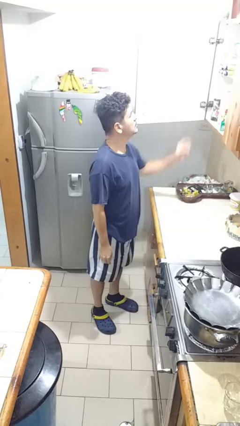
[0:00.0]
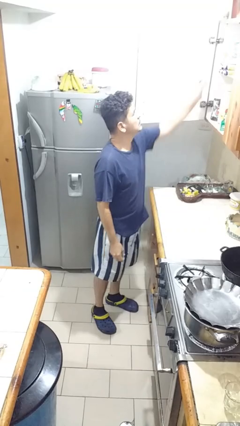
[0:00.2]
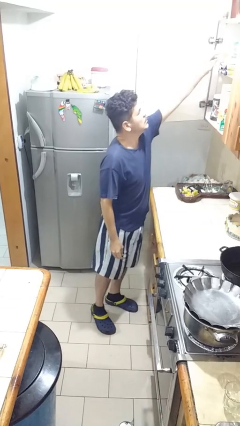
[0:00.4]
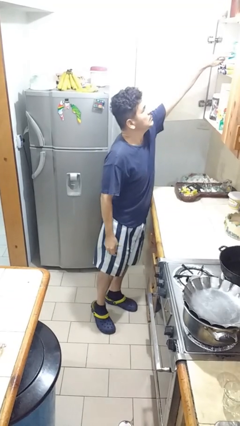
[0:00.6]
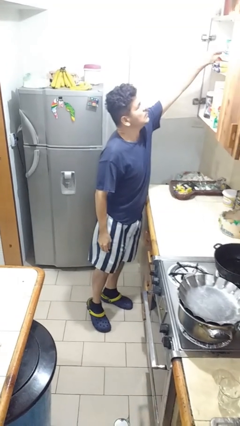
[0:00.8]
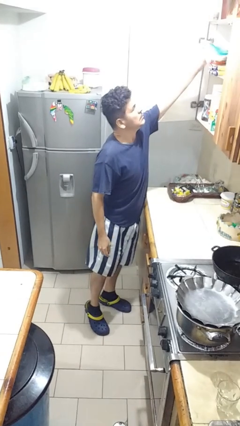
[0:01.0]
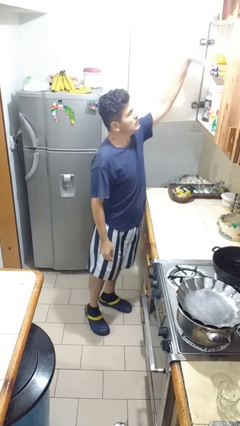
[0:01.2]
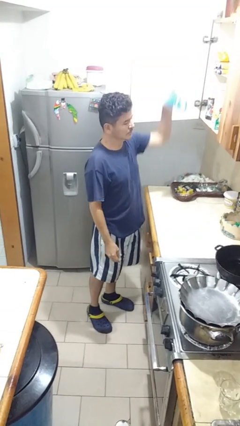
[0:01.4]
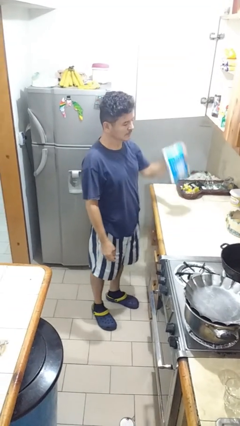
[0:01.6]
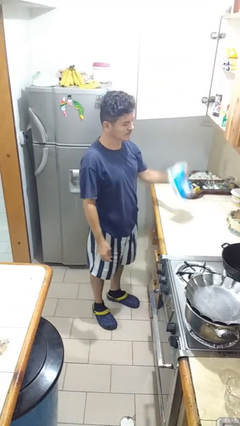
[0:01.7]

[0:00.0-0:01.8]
person takes object from cabinet

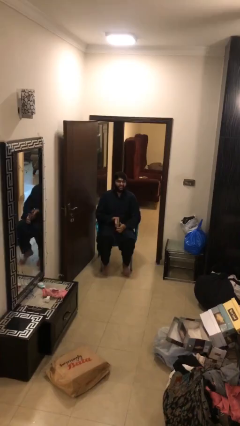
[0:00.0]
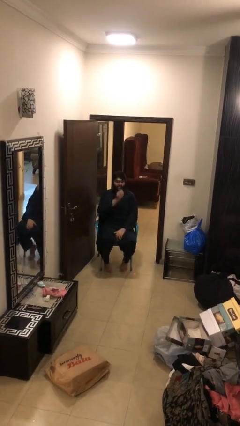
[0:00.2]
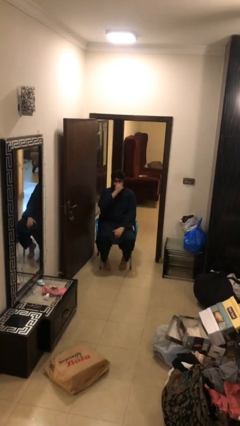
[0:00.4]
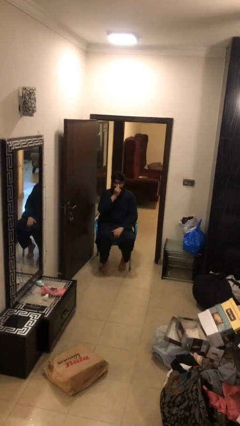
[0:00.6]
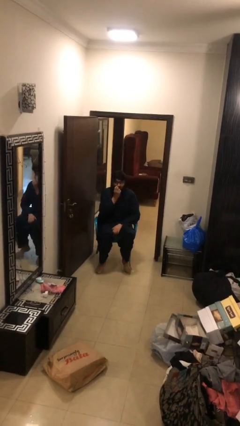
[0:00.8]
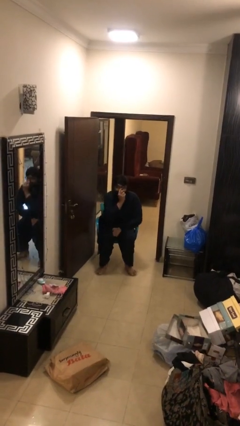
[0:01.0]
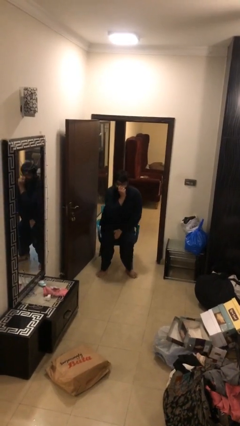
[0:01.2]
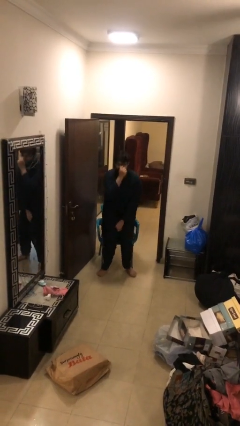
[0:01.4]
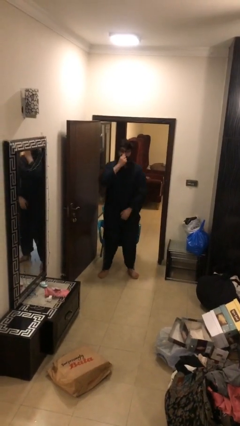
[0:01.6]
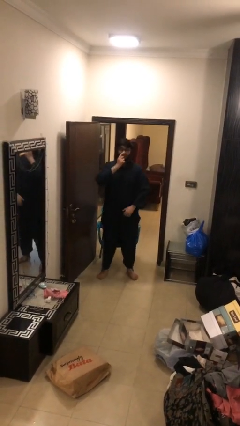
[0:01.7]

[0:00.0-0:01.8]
person stands up

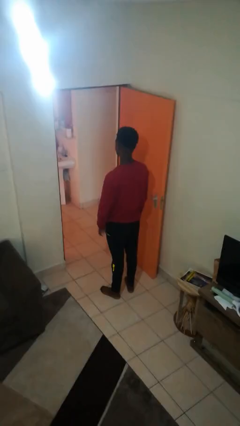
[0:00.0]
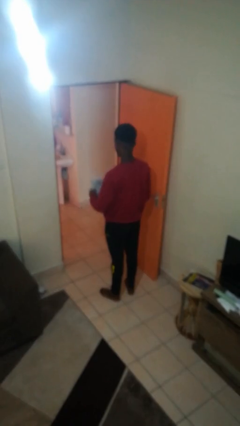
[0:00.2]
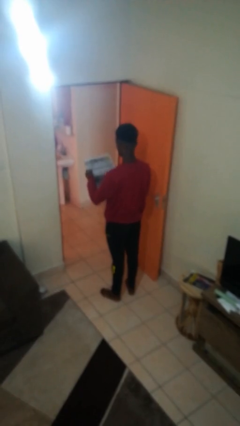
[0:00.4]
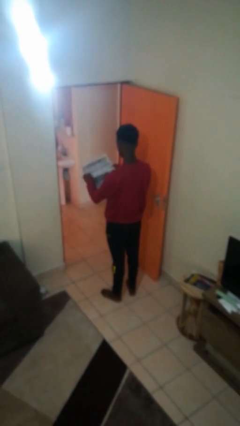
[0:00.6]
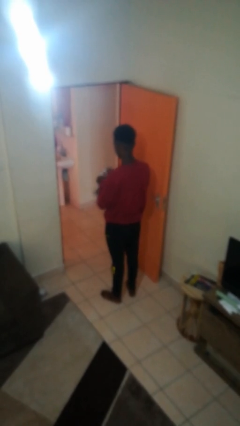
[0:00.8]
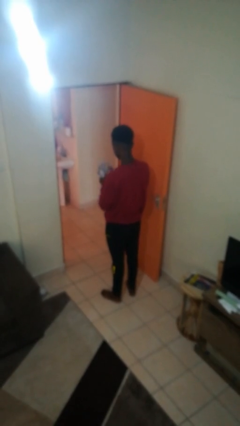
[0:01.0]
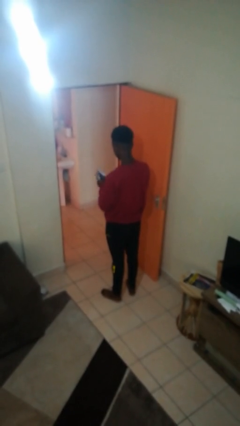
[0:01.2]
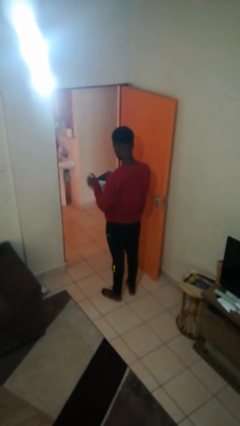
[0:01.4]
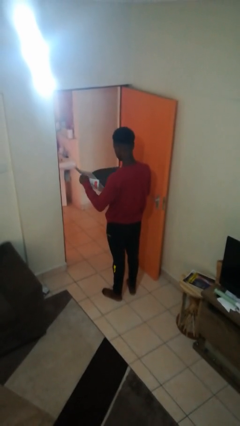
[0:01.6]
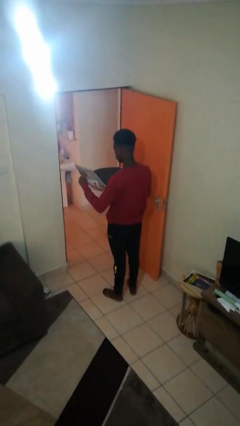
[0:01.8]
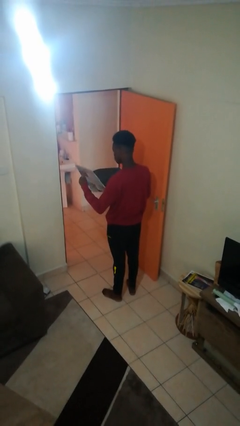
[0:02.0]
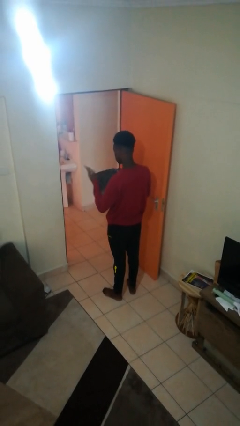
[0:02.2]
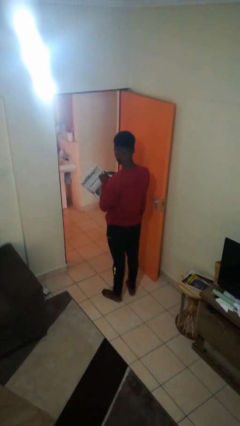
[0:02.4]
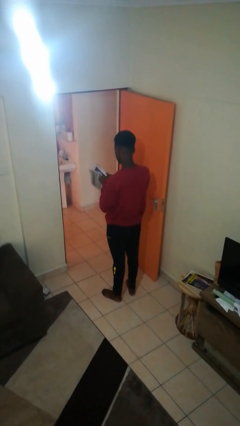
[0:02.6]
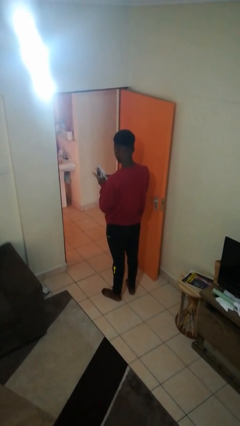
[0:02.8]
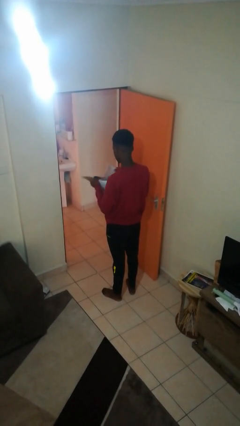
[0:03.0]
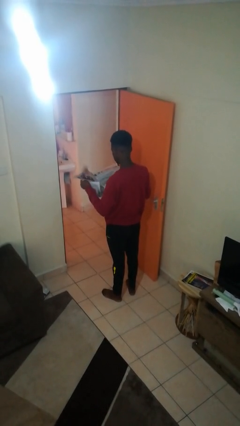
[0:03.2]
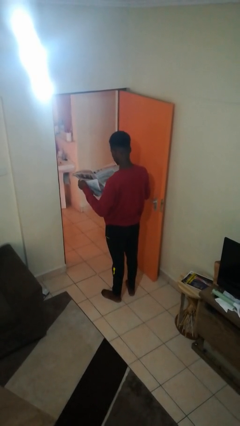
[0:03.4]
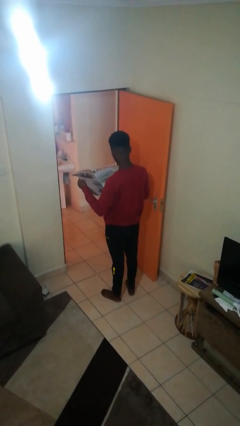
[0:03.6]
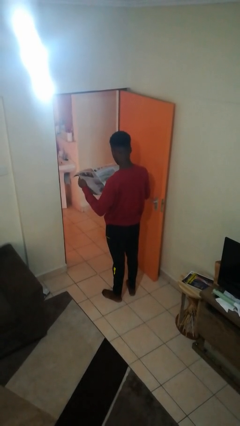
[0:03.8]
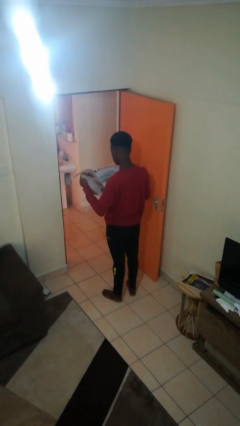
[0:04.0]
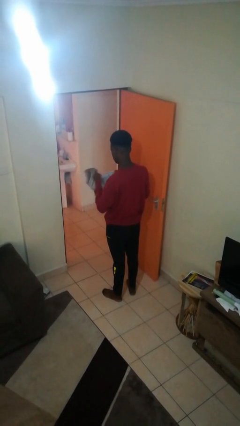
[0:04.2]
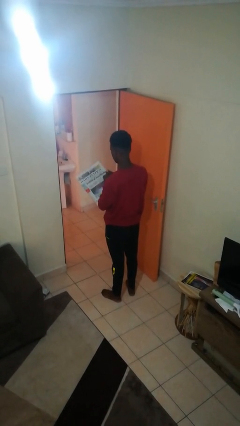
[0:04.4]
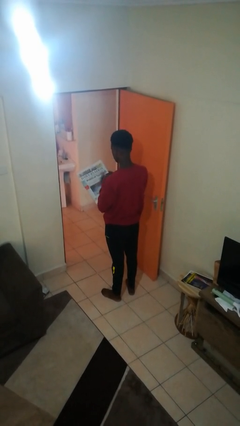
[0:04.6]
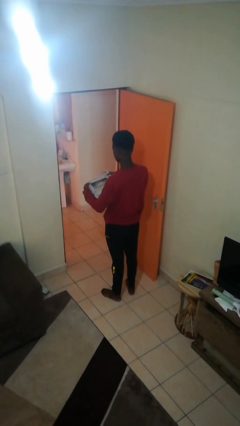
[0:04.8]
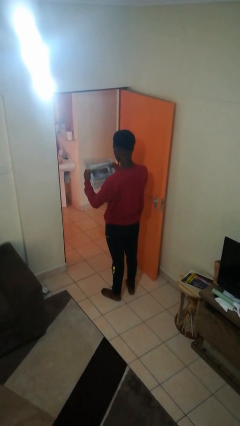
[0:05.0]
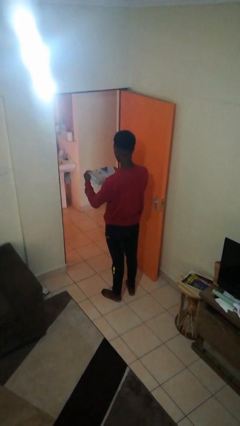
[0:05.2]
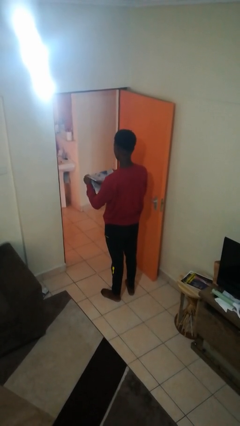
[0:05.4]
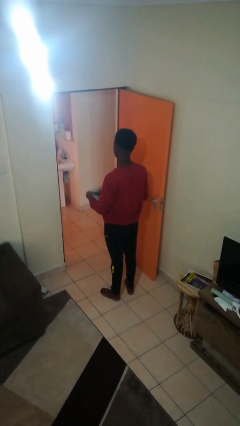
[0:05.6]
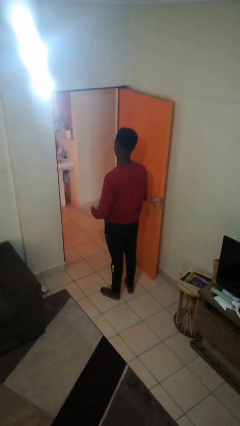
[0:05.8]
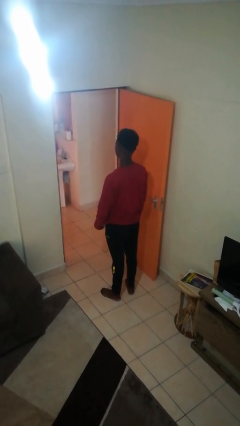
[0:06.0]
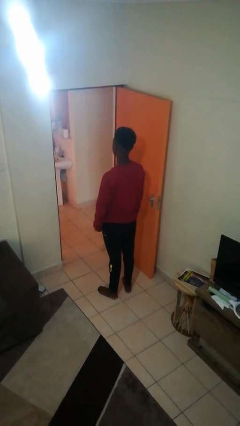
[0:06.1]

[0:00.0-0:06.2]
person reads newspaper

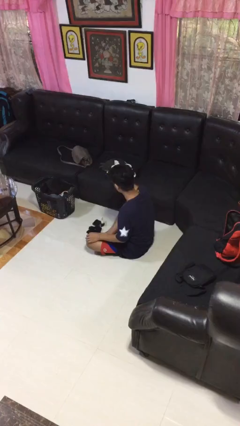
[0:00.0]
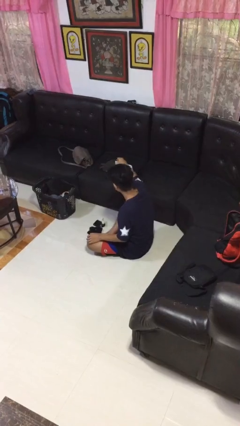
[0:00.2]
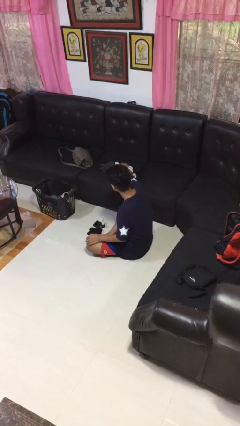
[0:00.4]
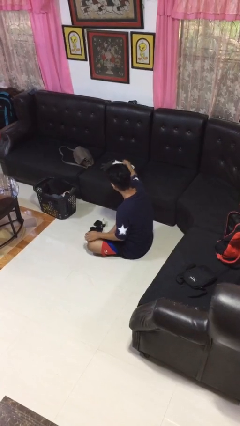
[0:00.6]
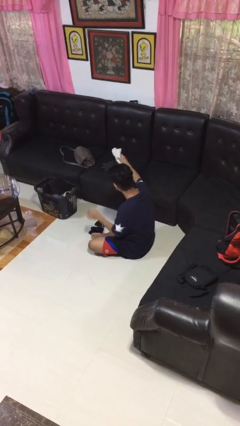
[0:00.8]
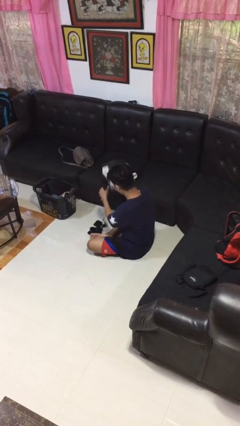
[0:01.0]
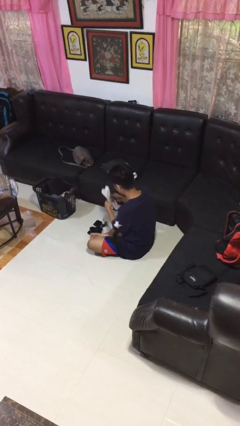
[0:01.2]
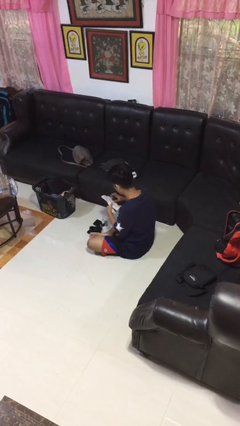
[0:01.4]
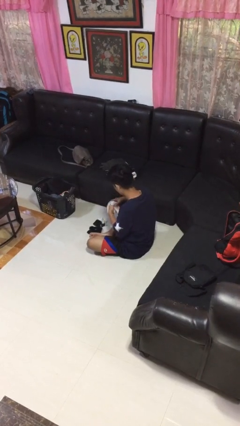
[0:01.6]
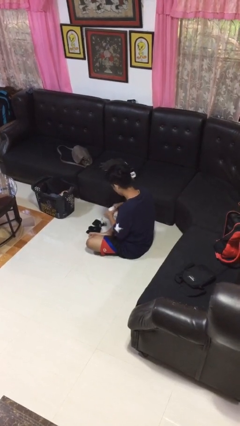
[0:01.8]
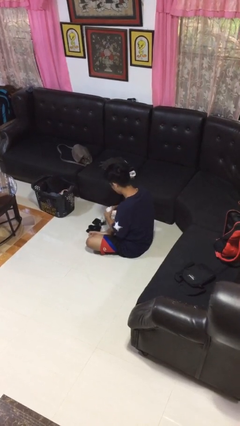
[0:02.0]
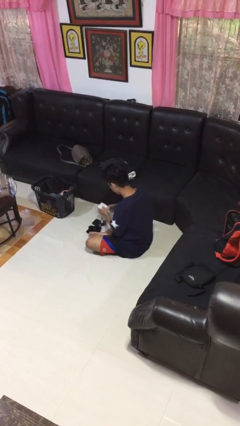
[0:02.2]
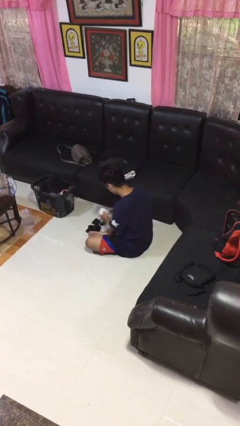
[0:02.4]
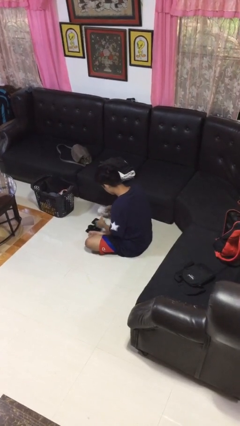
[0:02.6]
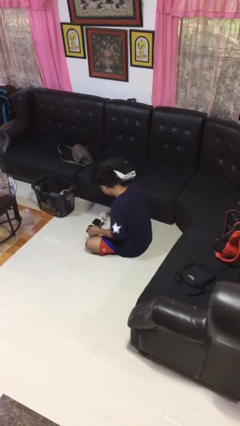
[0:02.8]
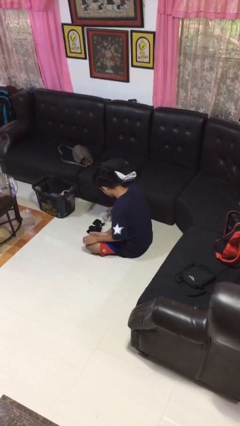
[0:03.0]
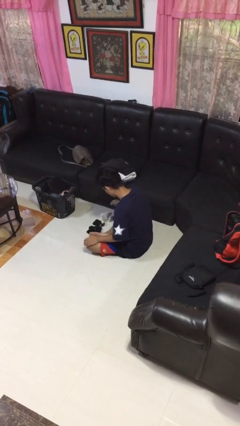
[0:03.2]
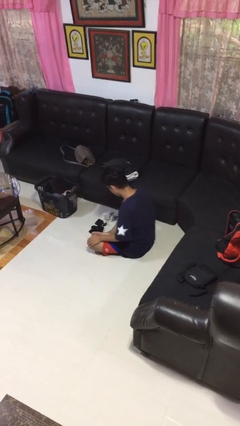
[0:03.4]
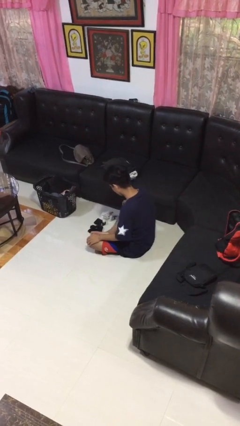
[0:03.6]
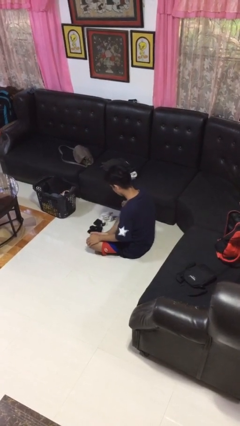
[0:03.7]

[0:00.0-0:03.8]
person folds socks

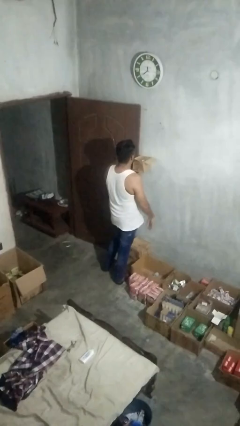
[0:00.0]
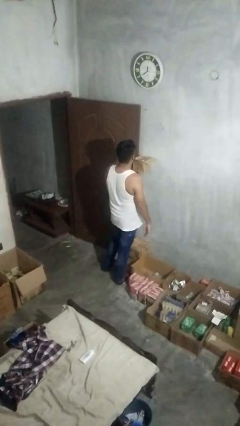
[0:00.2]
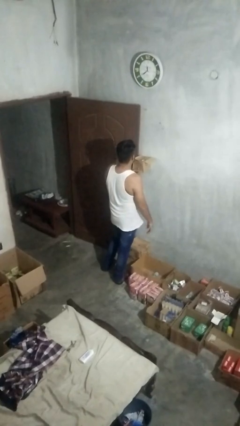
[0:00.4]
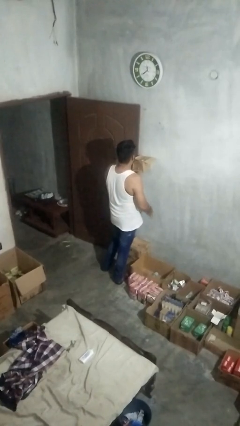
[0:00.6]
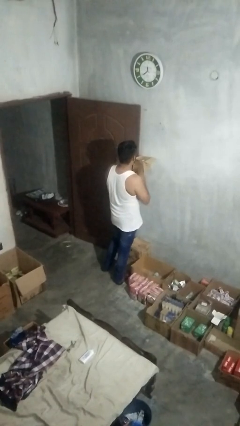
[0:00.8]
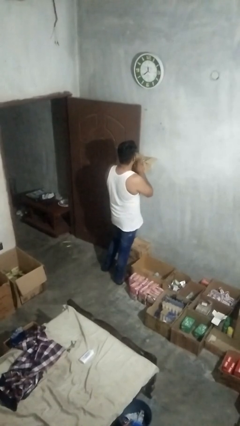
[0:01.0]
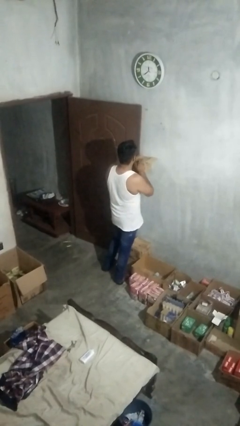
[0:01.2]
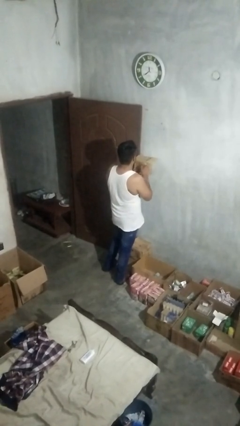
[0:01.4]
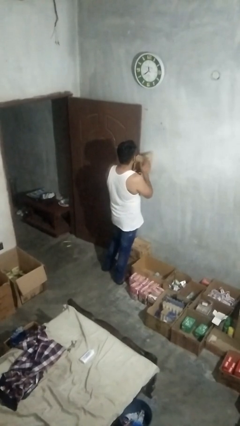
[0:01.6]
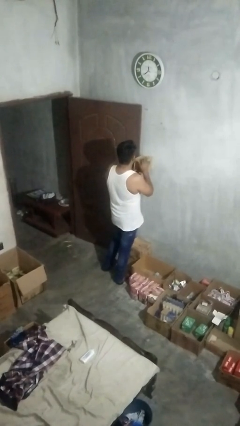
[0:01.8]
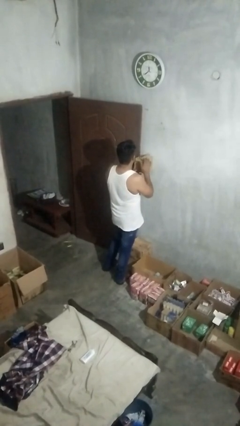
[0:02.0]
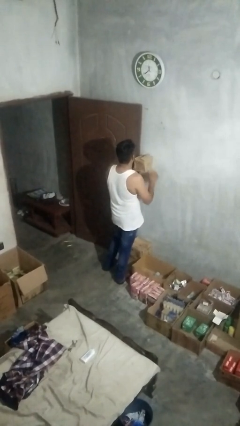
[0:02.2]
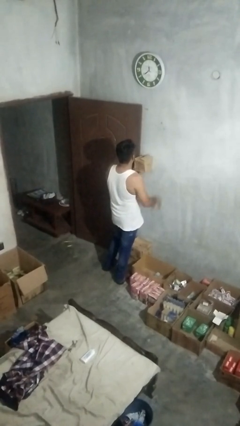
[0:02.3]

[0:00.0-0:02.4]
person closes mailbox

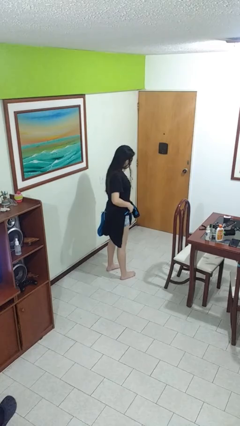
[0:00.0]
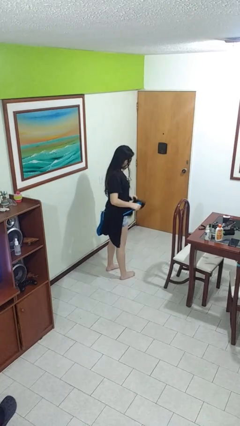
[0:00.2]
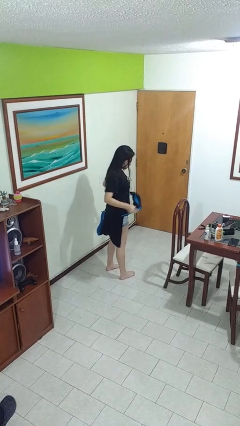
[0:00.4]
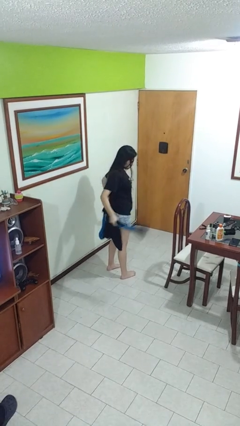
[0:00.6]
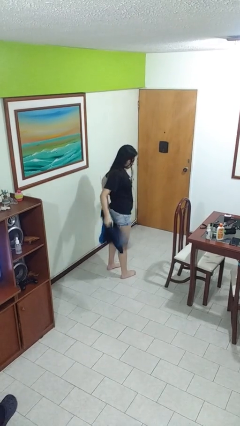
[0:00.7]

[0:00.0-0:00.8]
person unties jacket around waist

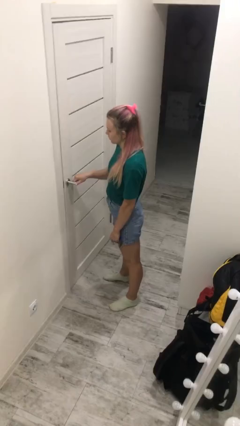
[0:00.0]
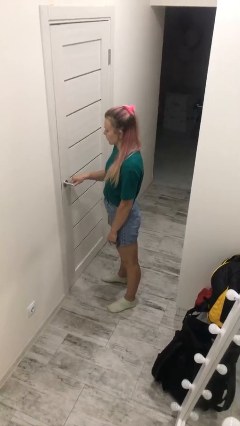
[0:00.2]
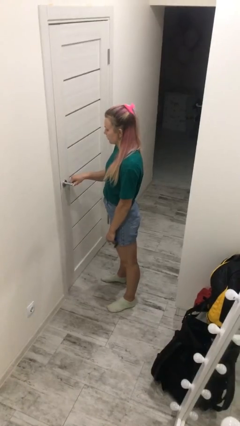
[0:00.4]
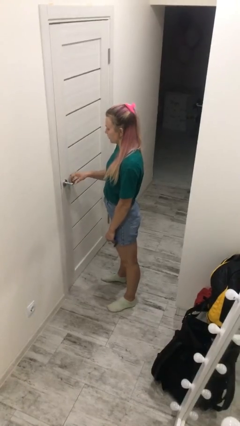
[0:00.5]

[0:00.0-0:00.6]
person closes facility door
